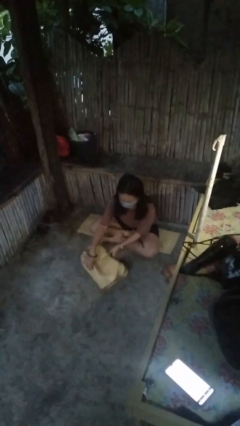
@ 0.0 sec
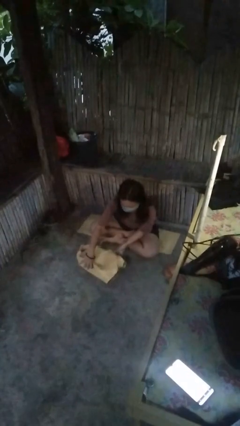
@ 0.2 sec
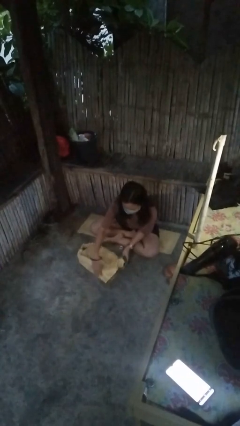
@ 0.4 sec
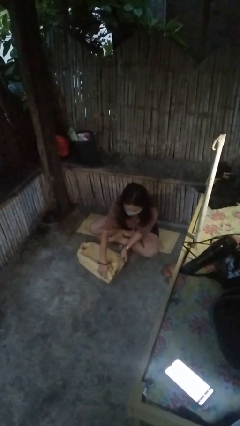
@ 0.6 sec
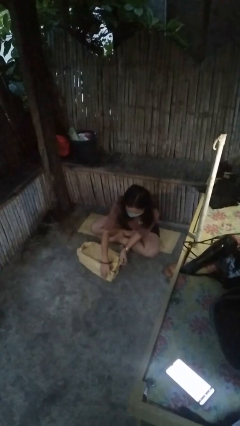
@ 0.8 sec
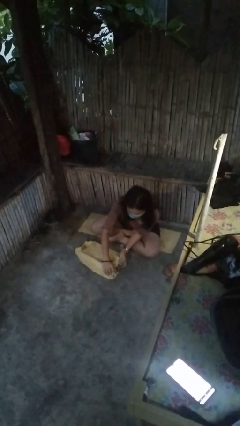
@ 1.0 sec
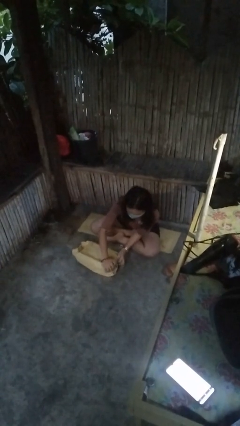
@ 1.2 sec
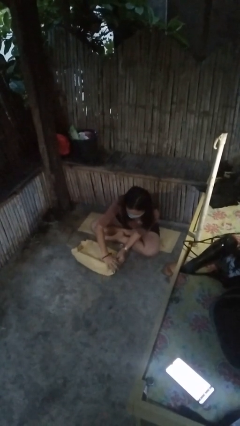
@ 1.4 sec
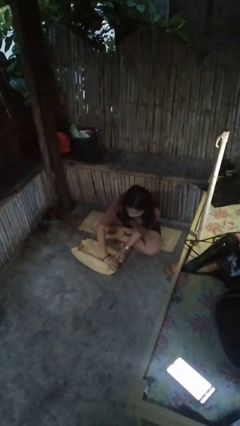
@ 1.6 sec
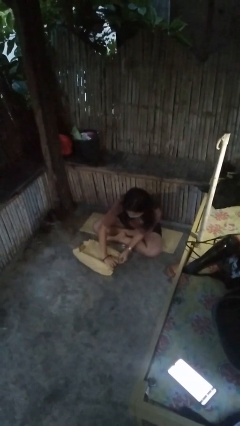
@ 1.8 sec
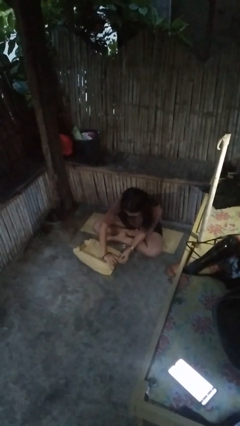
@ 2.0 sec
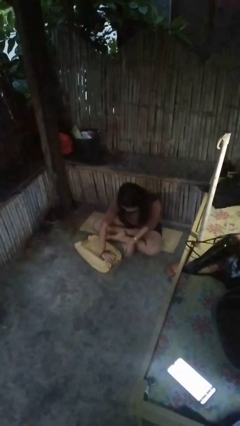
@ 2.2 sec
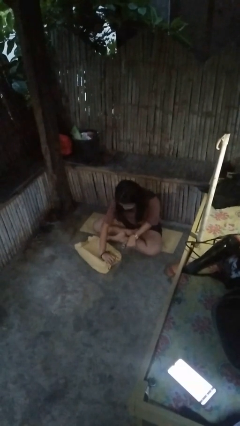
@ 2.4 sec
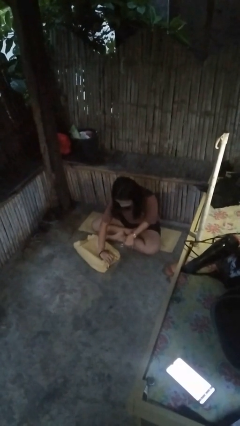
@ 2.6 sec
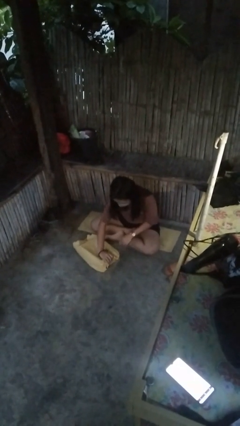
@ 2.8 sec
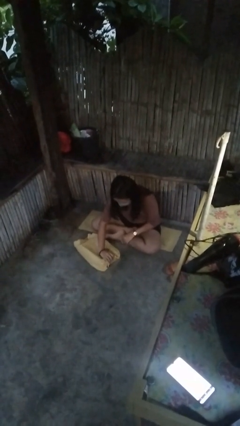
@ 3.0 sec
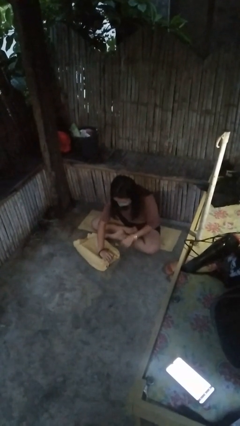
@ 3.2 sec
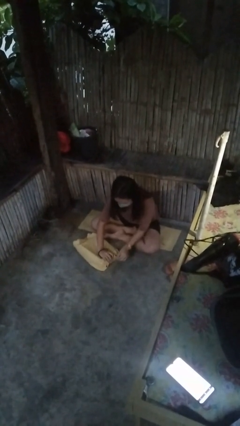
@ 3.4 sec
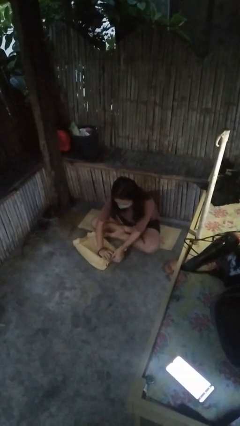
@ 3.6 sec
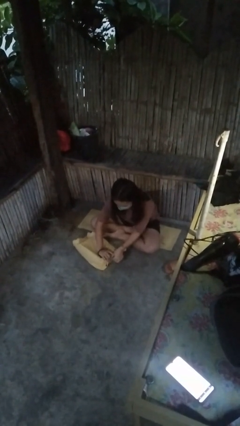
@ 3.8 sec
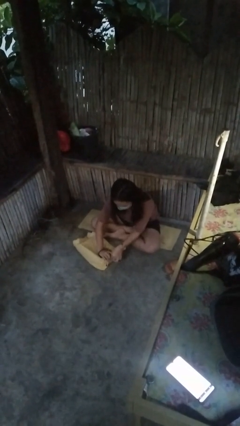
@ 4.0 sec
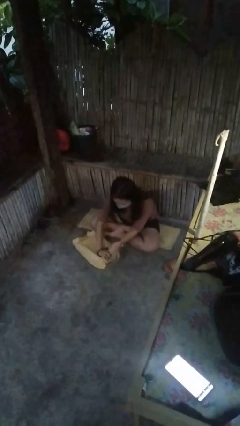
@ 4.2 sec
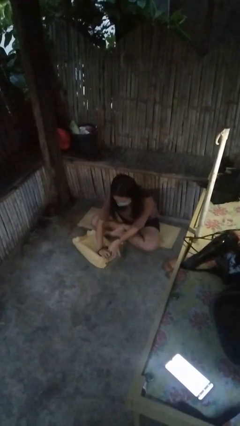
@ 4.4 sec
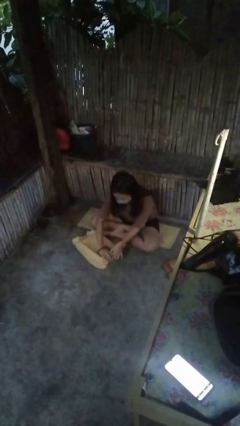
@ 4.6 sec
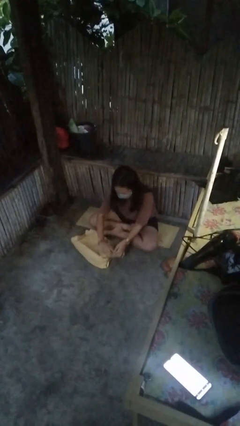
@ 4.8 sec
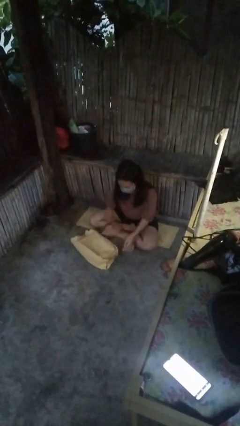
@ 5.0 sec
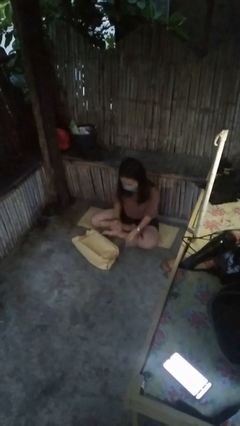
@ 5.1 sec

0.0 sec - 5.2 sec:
person wraps box

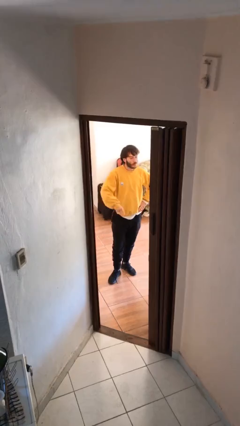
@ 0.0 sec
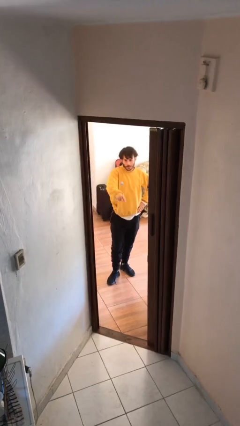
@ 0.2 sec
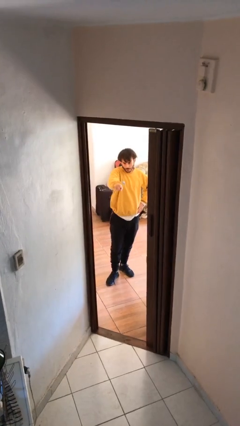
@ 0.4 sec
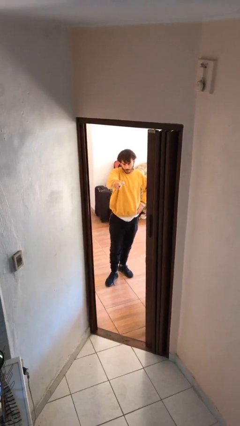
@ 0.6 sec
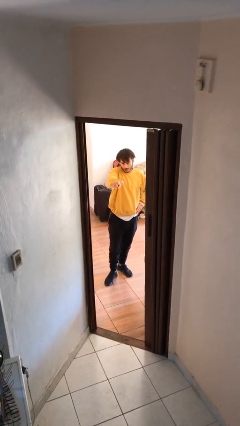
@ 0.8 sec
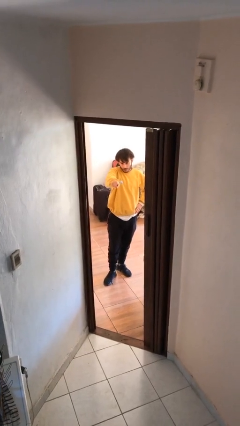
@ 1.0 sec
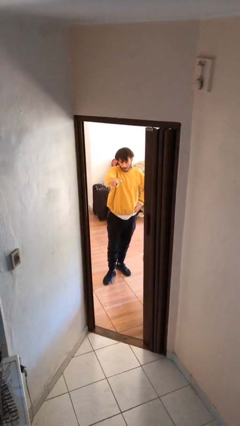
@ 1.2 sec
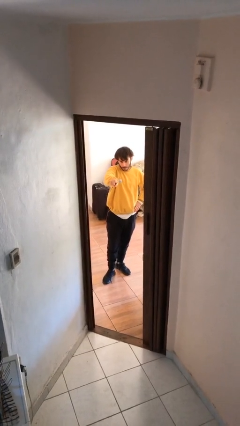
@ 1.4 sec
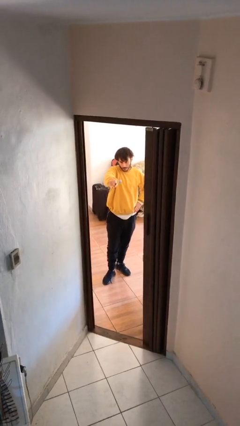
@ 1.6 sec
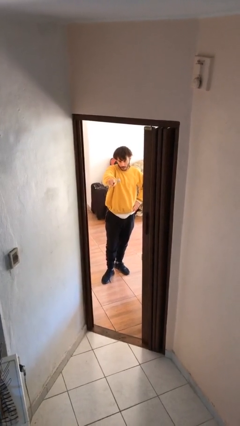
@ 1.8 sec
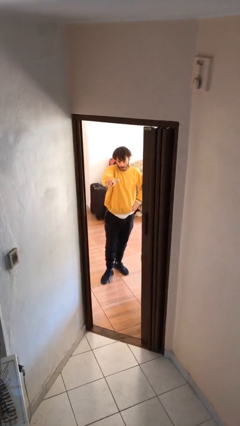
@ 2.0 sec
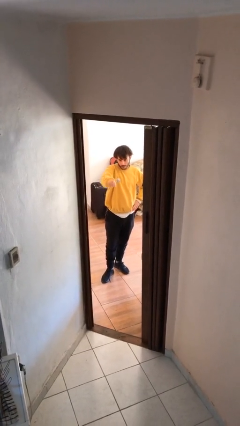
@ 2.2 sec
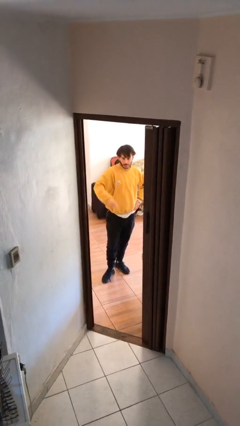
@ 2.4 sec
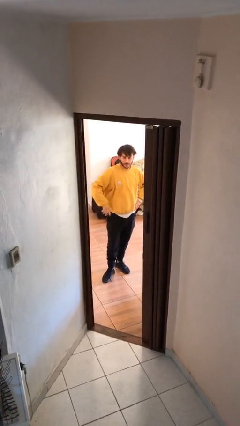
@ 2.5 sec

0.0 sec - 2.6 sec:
person points at person

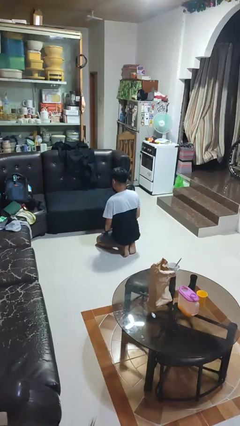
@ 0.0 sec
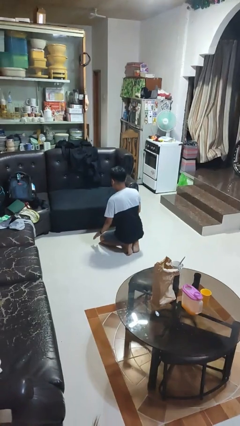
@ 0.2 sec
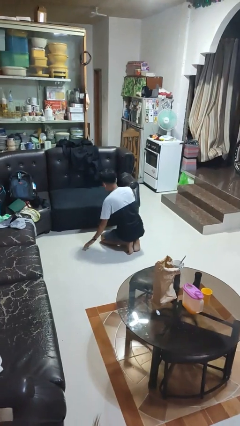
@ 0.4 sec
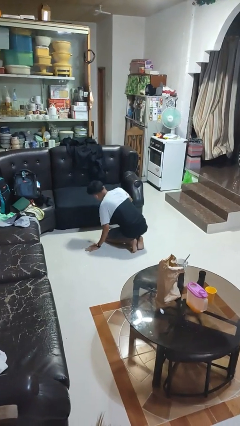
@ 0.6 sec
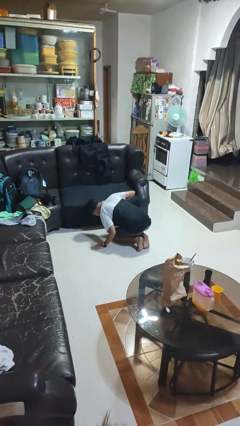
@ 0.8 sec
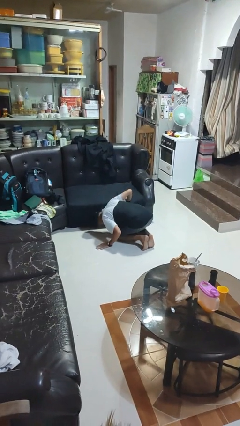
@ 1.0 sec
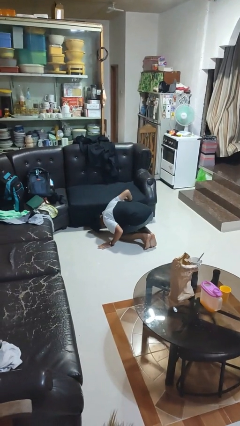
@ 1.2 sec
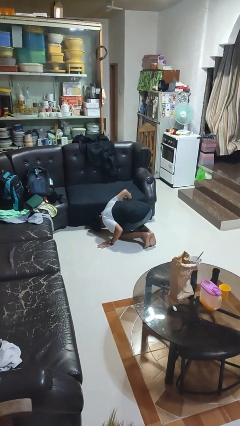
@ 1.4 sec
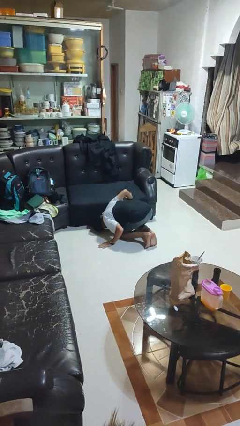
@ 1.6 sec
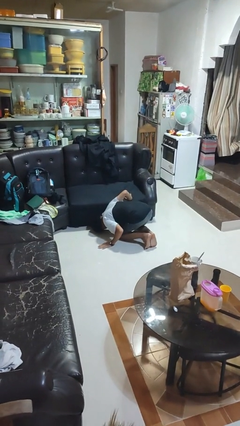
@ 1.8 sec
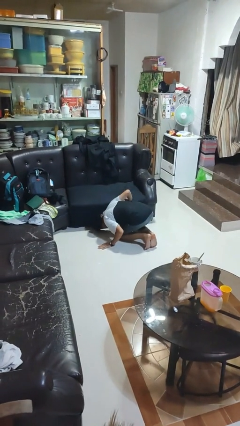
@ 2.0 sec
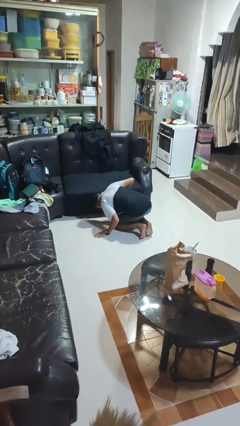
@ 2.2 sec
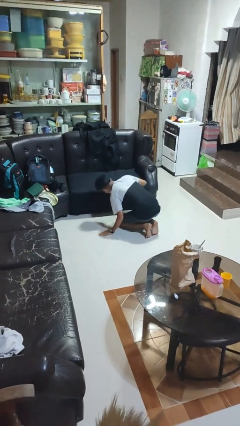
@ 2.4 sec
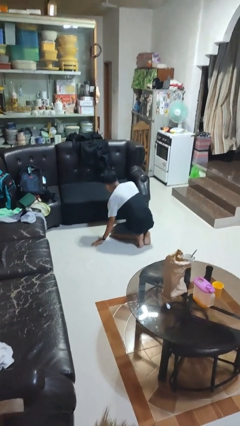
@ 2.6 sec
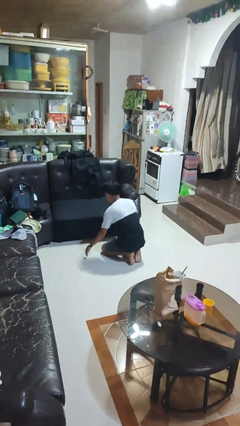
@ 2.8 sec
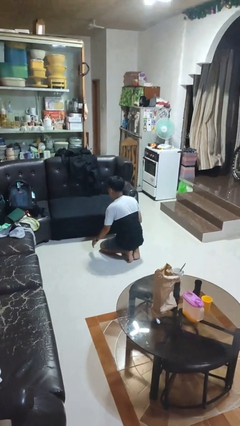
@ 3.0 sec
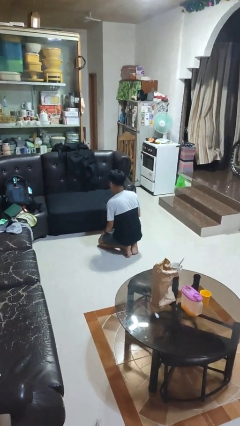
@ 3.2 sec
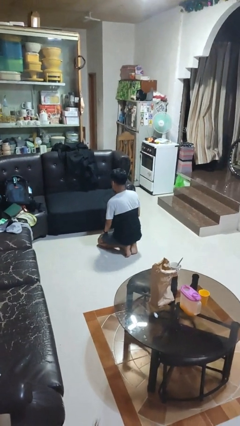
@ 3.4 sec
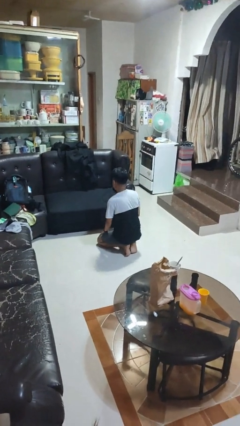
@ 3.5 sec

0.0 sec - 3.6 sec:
person searches under couch

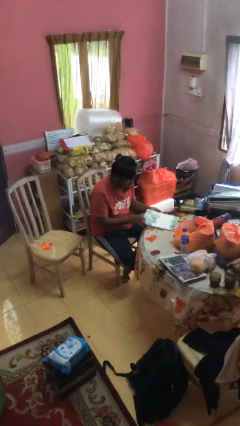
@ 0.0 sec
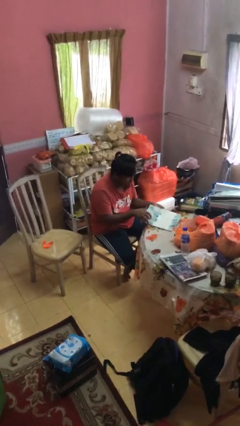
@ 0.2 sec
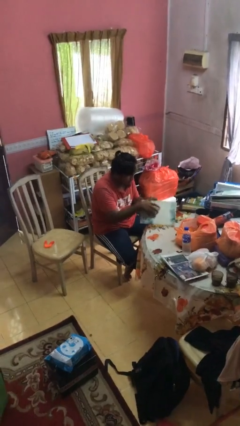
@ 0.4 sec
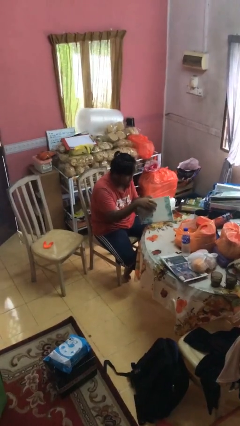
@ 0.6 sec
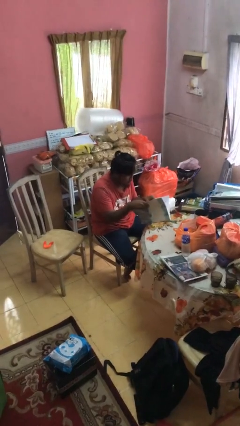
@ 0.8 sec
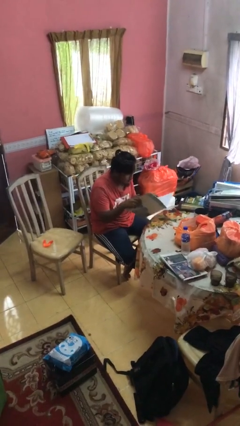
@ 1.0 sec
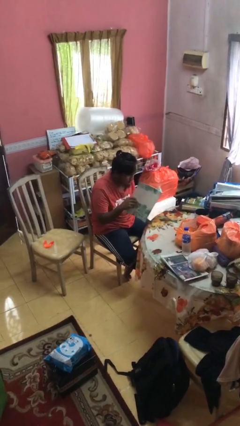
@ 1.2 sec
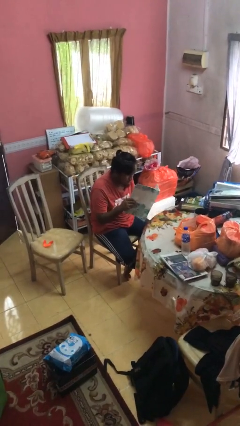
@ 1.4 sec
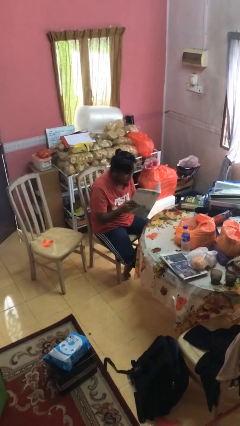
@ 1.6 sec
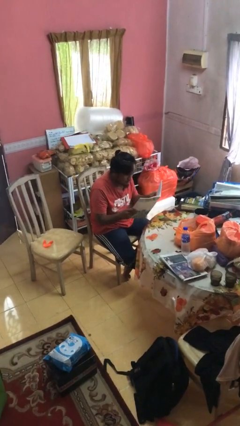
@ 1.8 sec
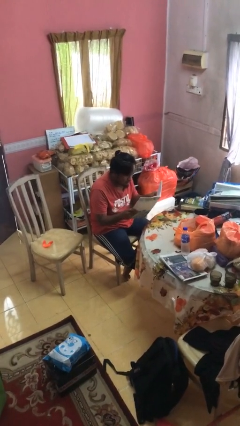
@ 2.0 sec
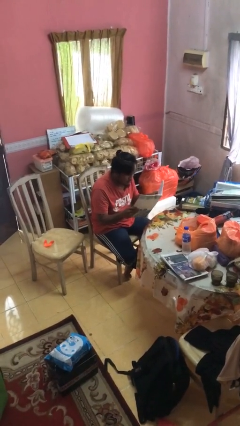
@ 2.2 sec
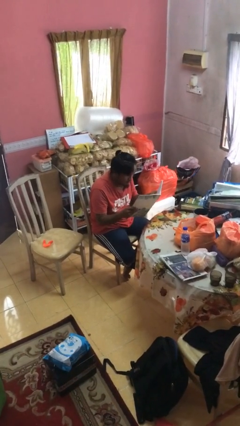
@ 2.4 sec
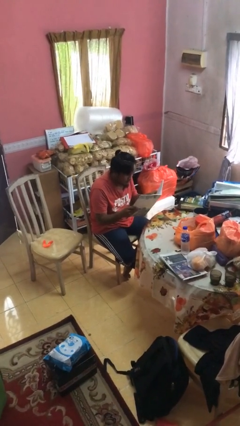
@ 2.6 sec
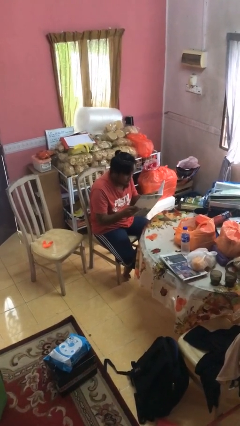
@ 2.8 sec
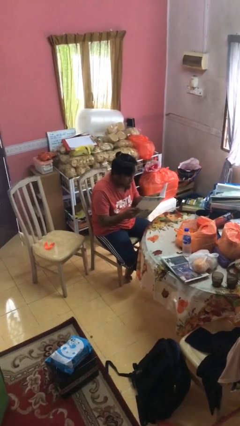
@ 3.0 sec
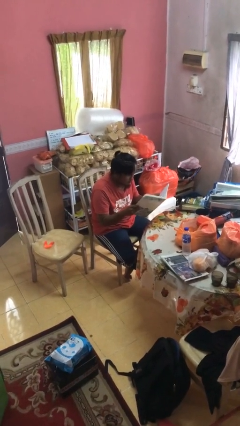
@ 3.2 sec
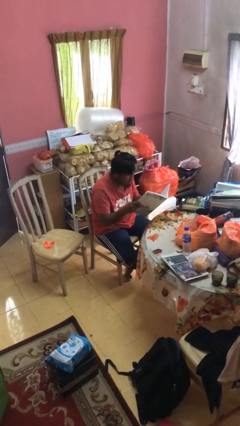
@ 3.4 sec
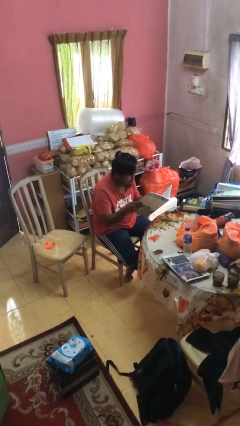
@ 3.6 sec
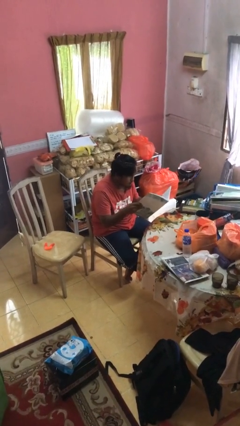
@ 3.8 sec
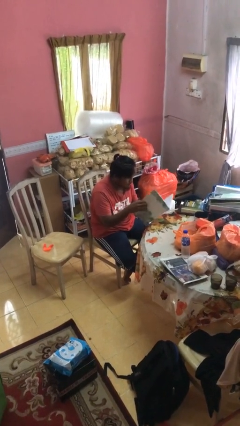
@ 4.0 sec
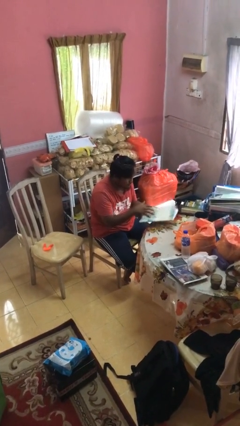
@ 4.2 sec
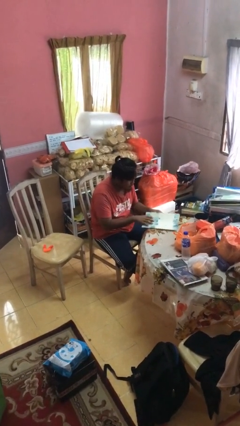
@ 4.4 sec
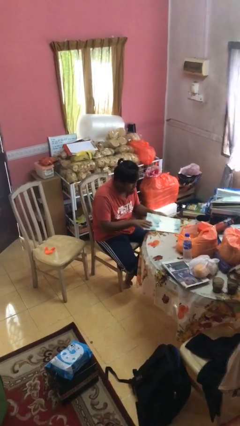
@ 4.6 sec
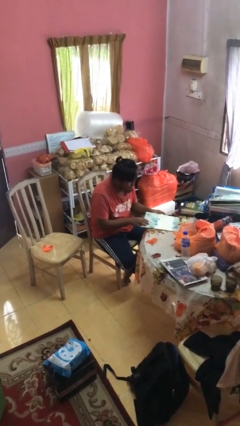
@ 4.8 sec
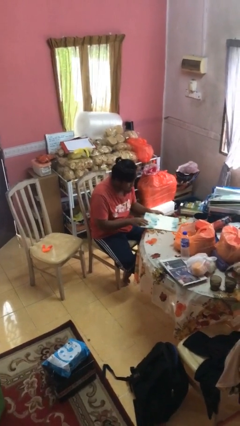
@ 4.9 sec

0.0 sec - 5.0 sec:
person reads magazine

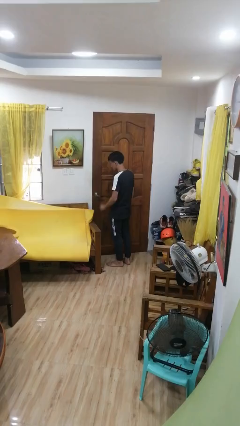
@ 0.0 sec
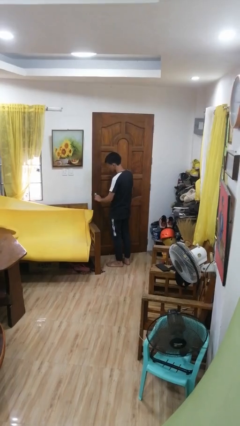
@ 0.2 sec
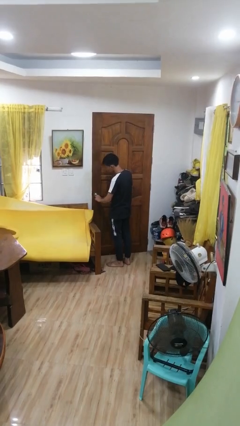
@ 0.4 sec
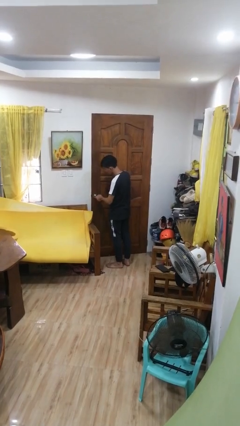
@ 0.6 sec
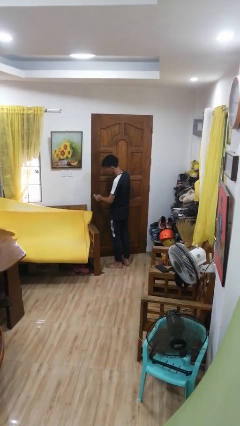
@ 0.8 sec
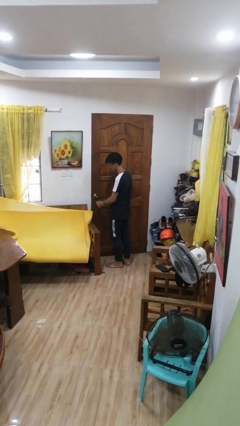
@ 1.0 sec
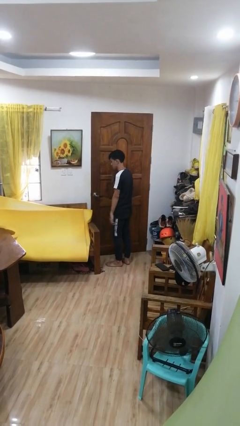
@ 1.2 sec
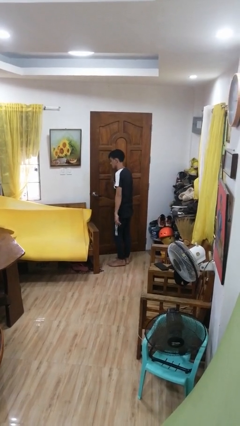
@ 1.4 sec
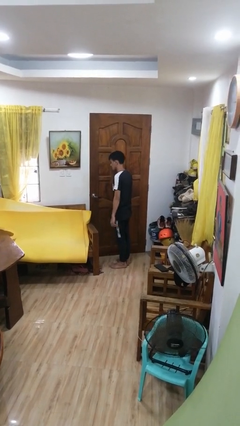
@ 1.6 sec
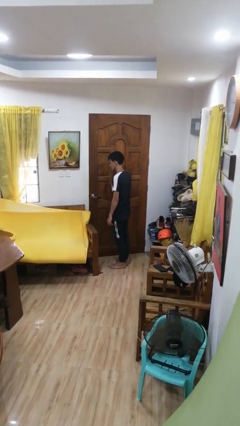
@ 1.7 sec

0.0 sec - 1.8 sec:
person locks door with keys
